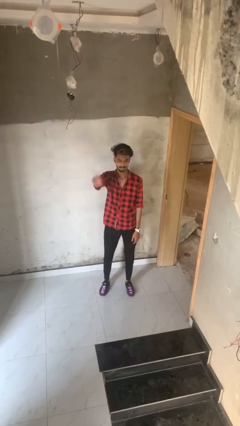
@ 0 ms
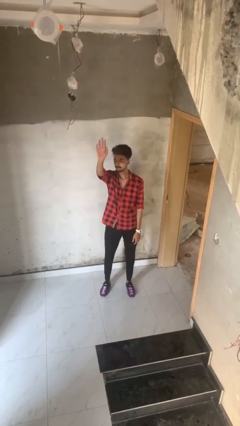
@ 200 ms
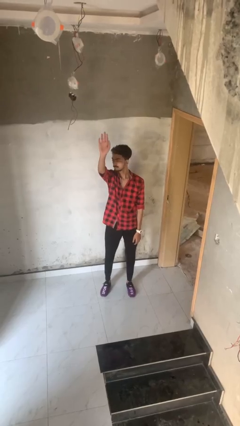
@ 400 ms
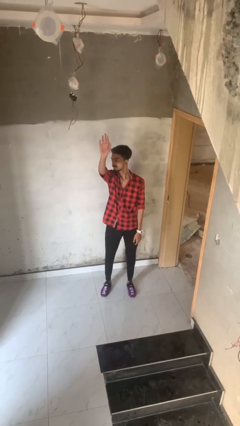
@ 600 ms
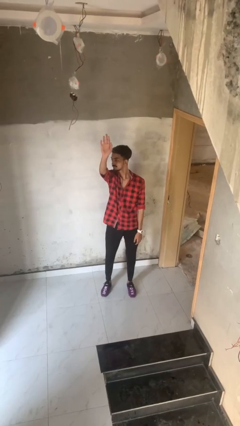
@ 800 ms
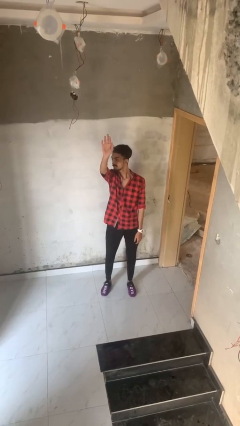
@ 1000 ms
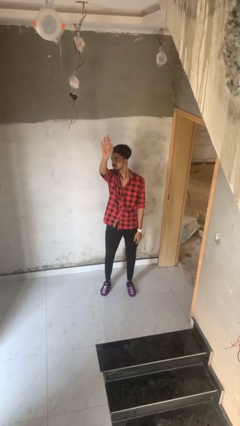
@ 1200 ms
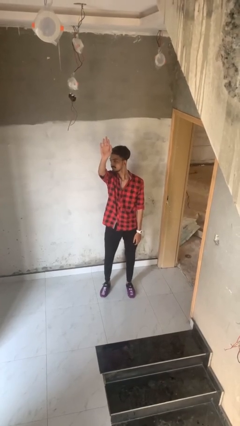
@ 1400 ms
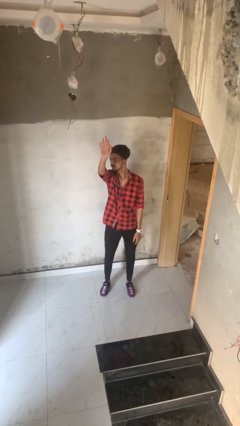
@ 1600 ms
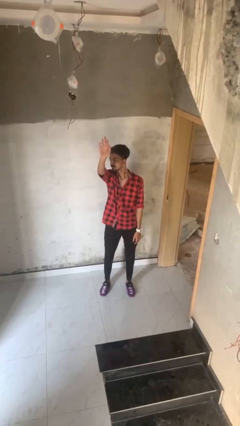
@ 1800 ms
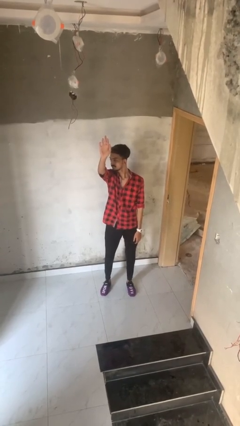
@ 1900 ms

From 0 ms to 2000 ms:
person gestures raise hand

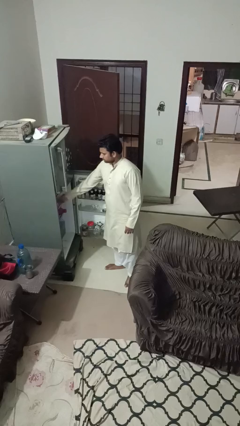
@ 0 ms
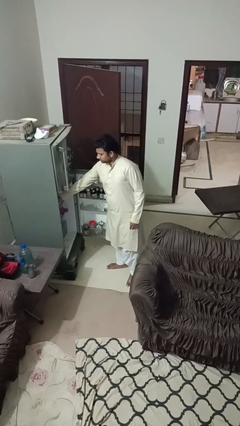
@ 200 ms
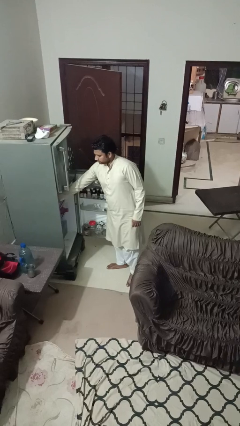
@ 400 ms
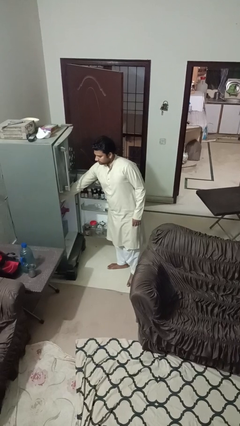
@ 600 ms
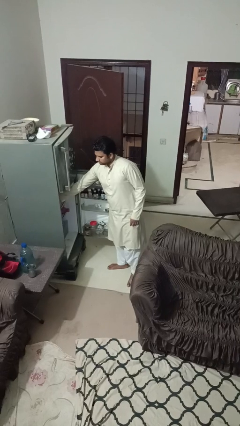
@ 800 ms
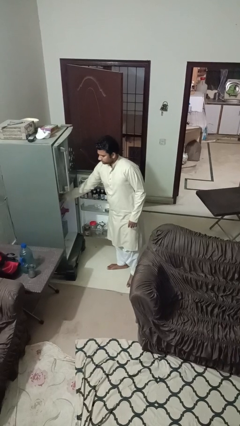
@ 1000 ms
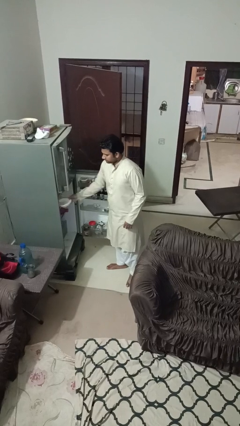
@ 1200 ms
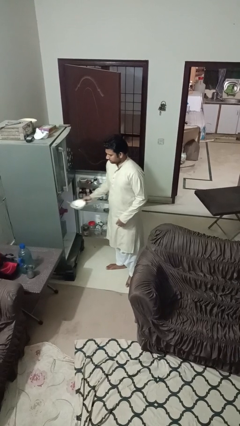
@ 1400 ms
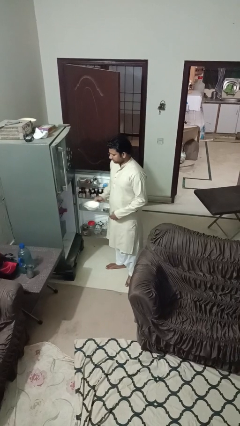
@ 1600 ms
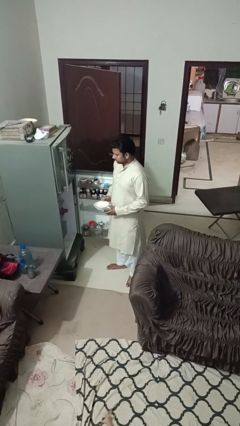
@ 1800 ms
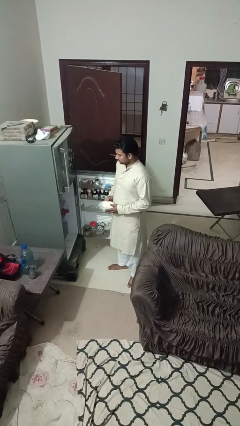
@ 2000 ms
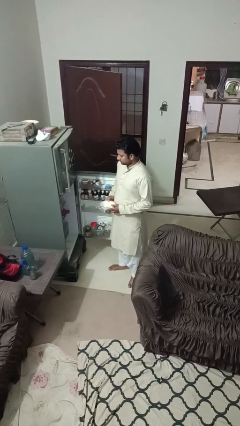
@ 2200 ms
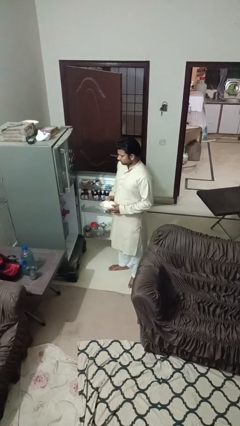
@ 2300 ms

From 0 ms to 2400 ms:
person takes object from refrigerator

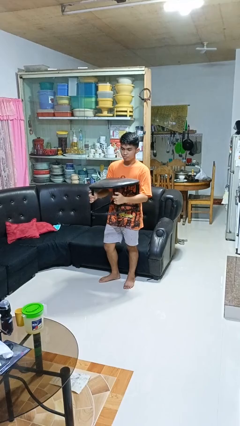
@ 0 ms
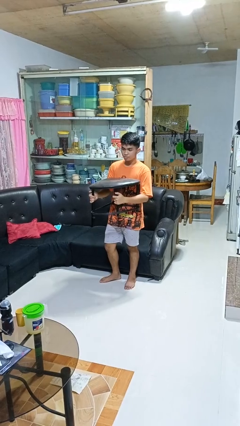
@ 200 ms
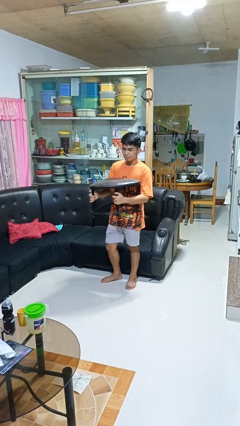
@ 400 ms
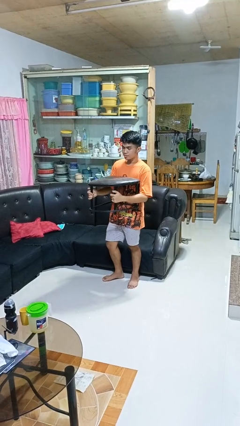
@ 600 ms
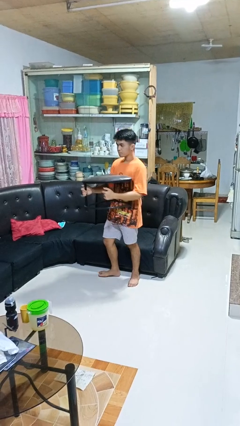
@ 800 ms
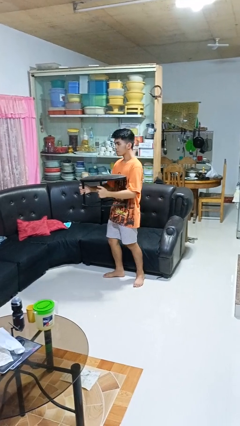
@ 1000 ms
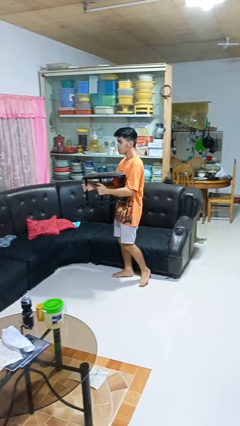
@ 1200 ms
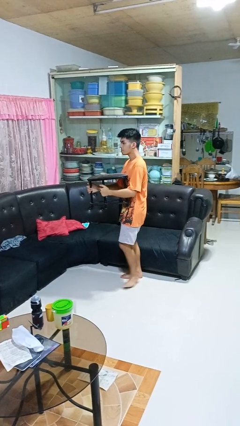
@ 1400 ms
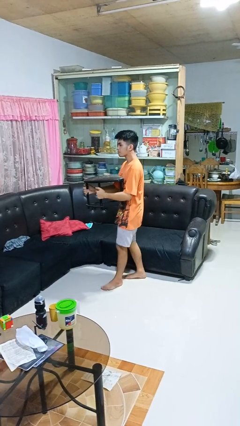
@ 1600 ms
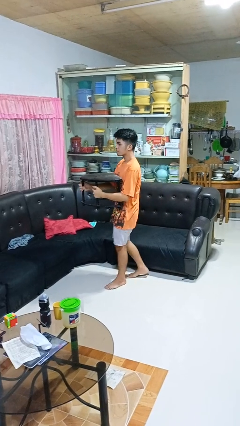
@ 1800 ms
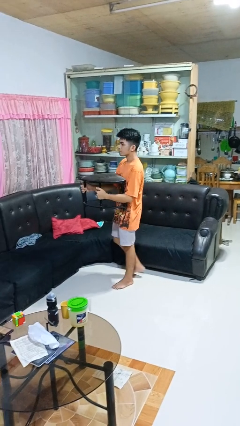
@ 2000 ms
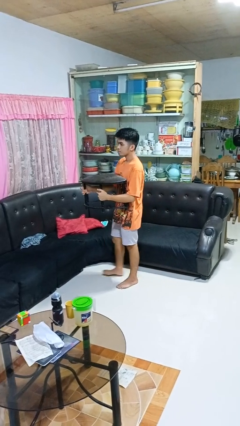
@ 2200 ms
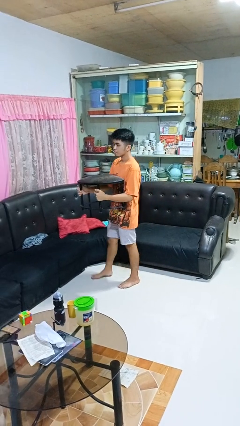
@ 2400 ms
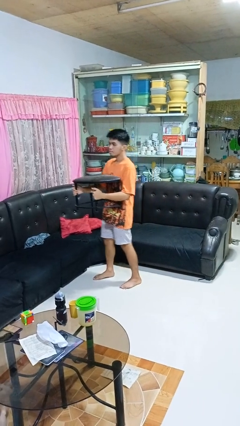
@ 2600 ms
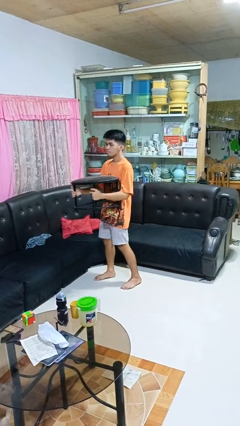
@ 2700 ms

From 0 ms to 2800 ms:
person carries furniture

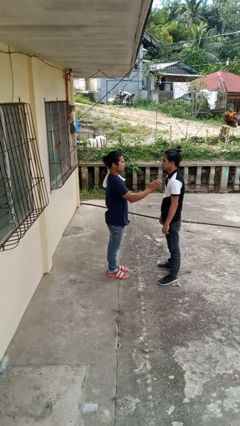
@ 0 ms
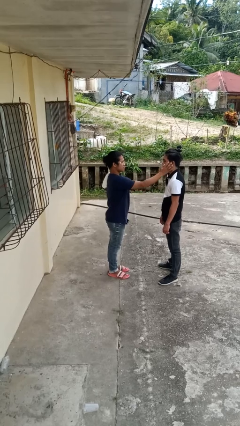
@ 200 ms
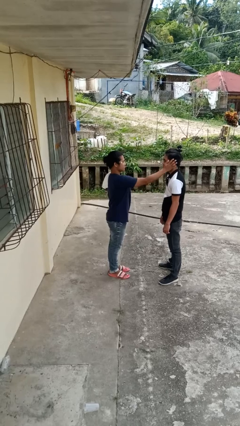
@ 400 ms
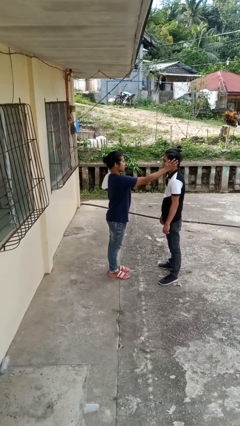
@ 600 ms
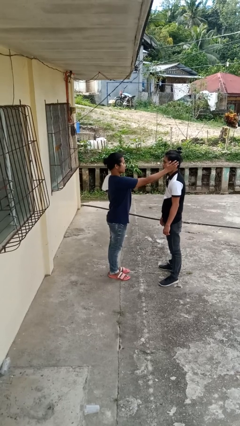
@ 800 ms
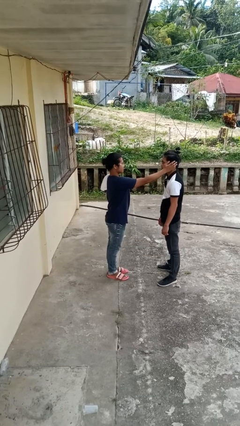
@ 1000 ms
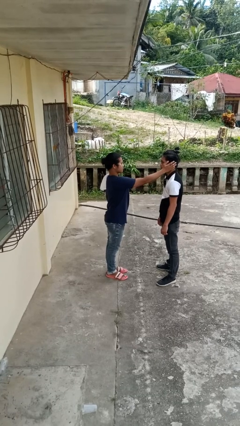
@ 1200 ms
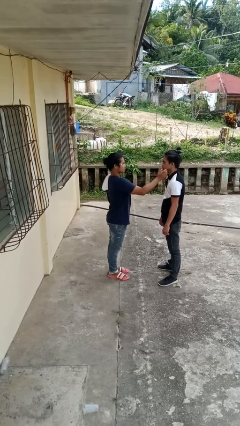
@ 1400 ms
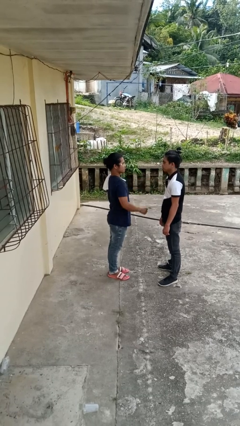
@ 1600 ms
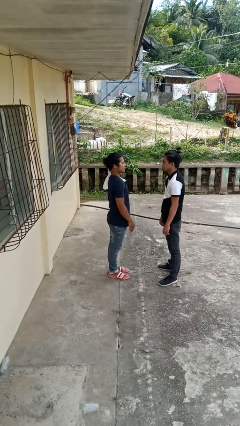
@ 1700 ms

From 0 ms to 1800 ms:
person touches face of person

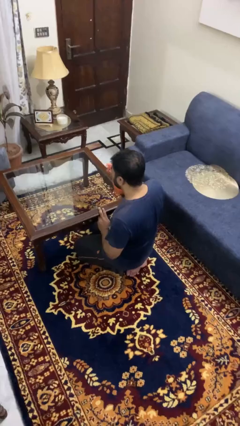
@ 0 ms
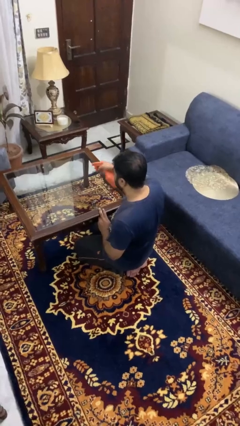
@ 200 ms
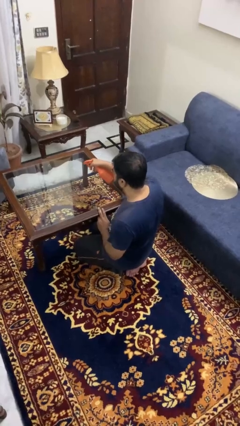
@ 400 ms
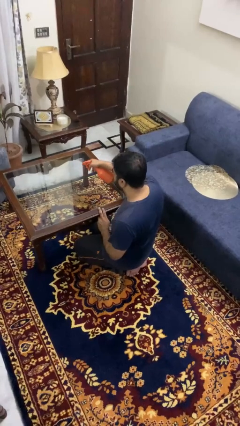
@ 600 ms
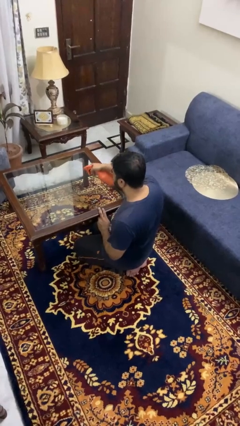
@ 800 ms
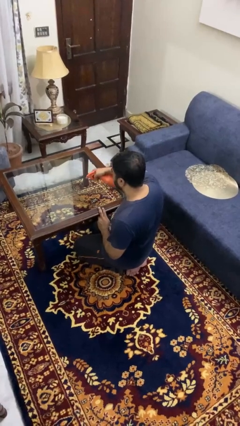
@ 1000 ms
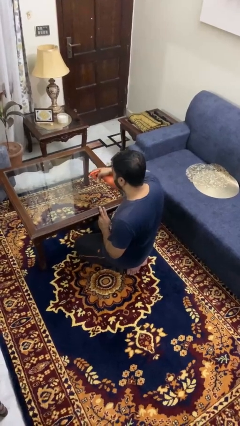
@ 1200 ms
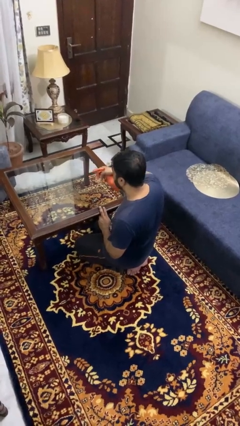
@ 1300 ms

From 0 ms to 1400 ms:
person sprays from bottle

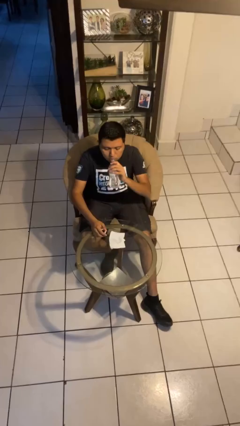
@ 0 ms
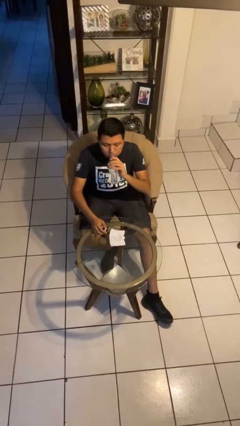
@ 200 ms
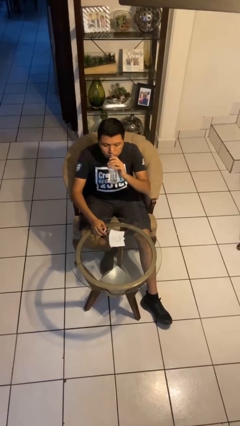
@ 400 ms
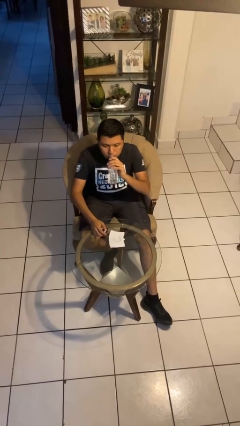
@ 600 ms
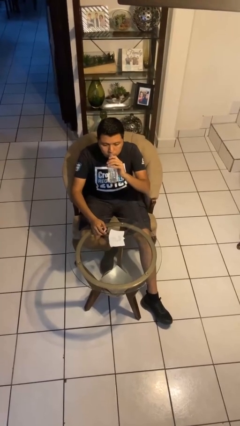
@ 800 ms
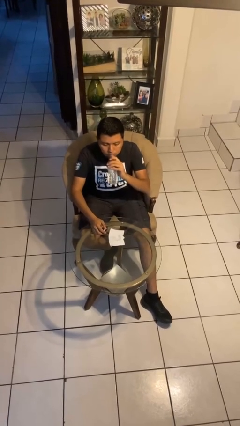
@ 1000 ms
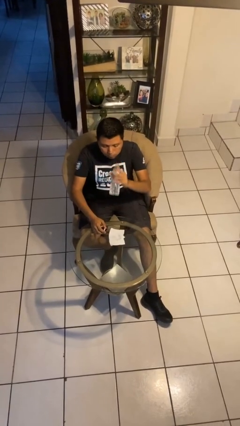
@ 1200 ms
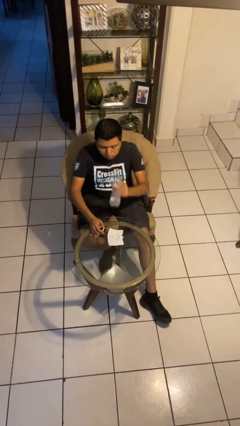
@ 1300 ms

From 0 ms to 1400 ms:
person drinks from bottle

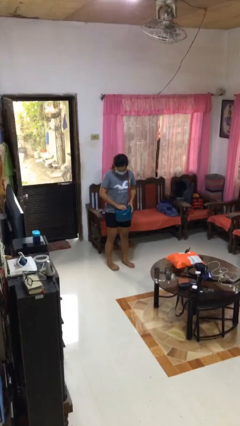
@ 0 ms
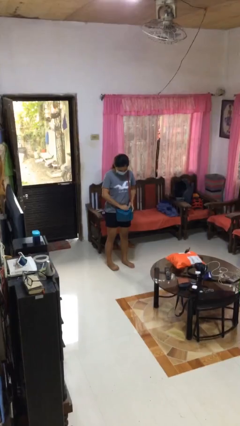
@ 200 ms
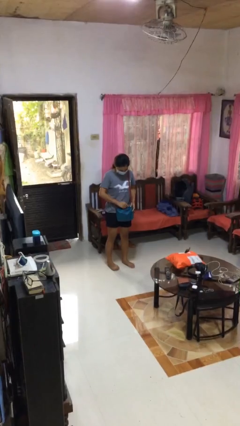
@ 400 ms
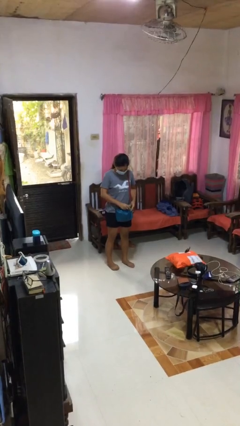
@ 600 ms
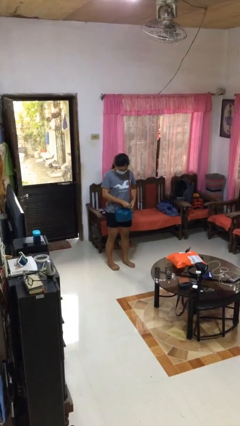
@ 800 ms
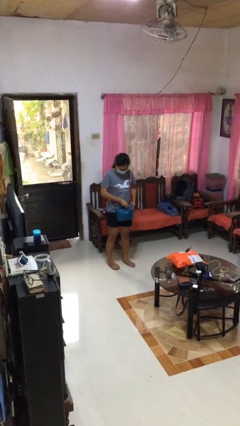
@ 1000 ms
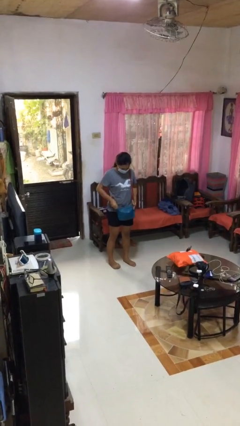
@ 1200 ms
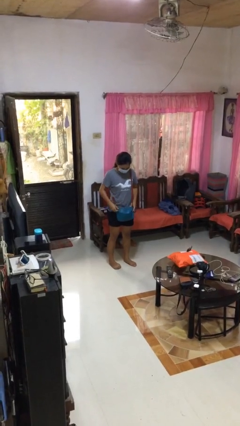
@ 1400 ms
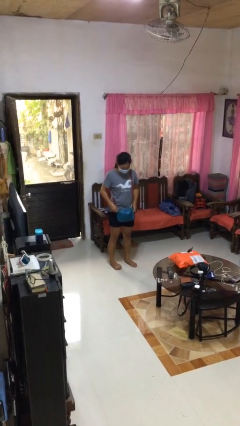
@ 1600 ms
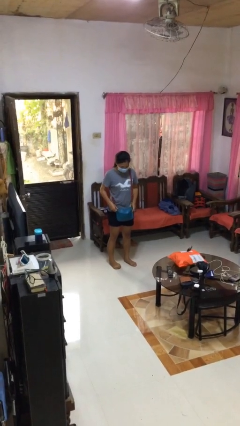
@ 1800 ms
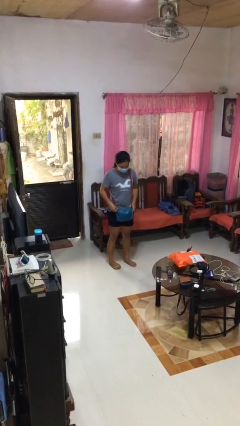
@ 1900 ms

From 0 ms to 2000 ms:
person puts object into purse

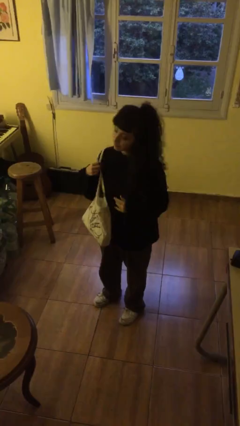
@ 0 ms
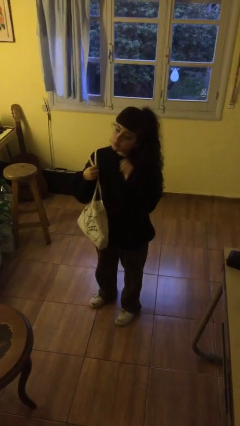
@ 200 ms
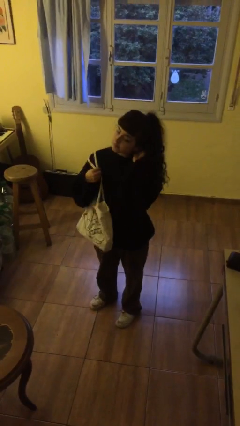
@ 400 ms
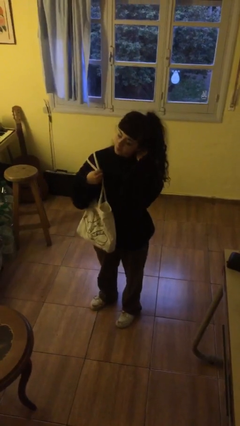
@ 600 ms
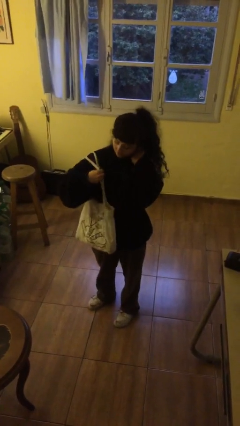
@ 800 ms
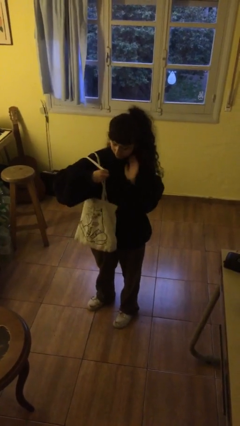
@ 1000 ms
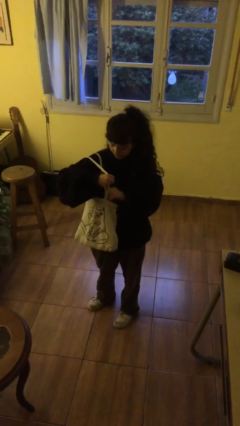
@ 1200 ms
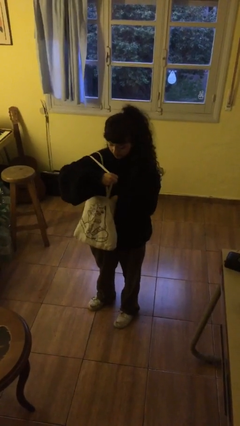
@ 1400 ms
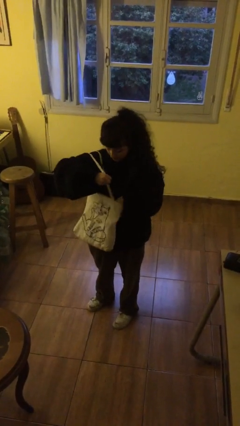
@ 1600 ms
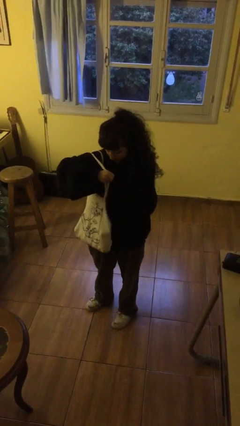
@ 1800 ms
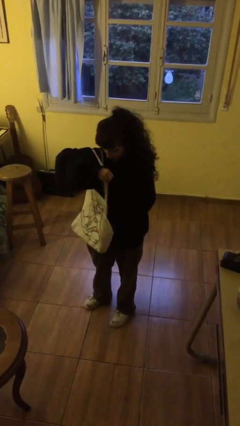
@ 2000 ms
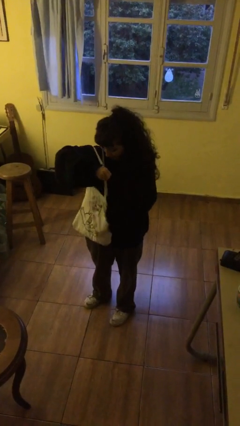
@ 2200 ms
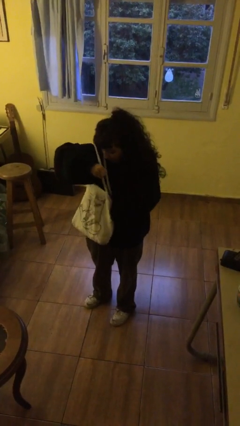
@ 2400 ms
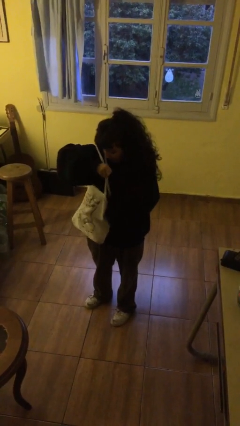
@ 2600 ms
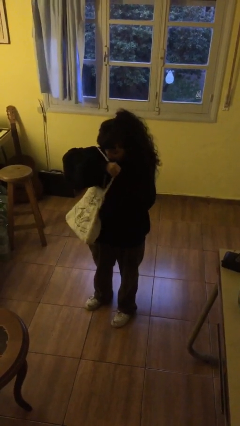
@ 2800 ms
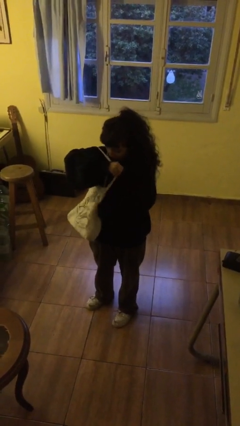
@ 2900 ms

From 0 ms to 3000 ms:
person searches in purse
